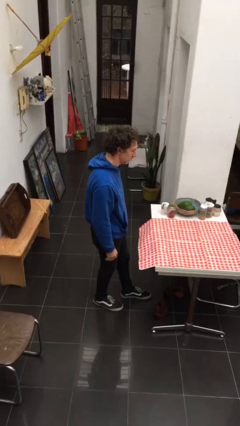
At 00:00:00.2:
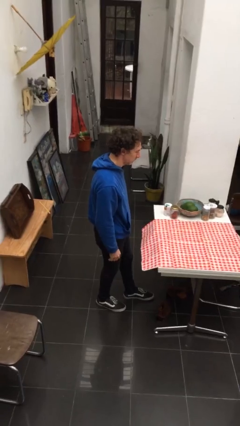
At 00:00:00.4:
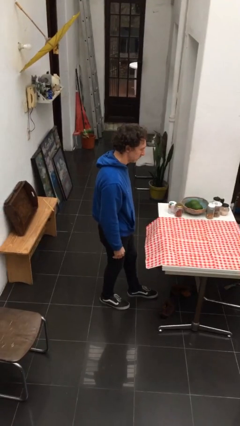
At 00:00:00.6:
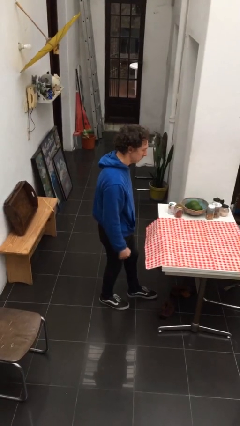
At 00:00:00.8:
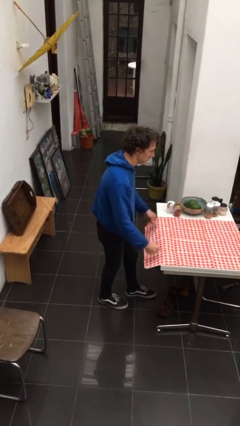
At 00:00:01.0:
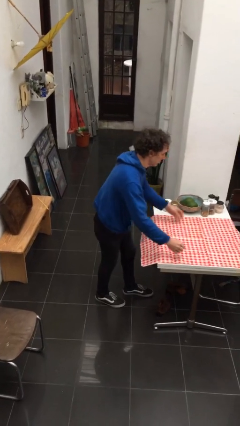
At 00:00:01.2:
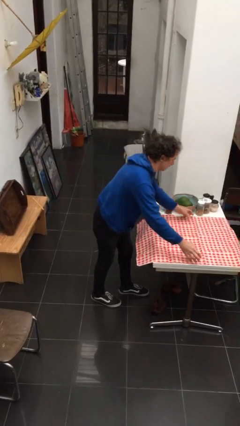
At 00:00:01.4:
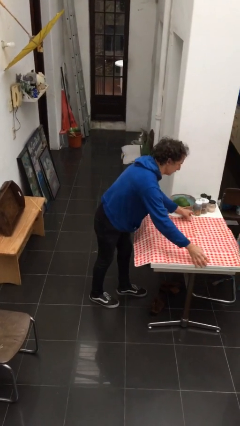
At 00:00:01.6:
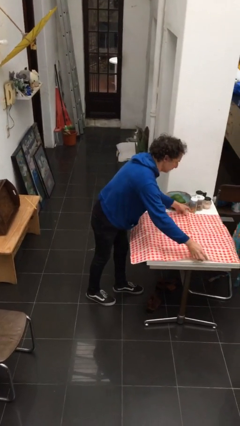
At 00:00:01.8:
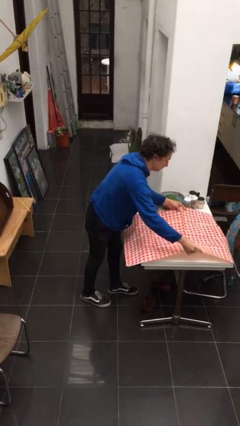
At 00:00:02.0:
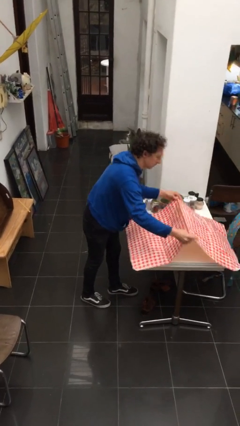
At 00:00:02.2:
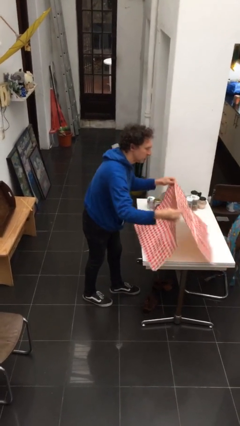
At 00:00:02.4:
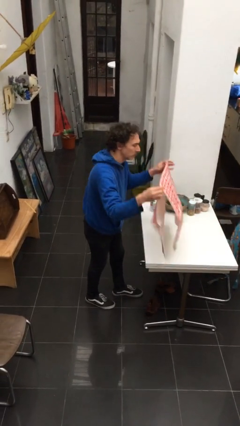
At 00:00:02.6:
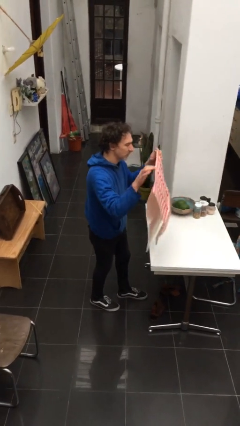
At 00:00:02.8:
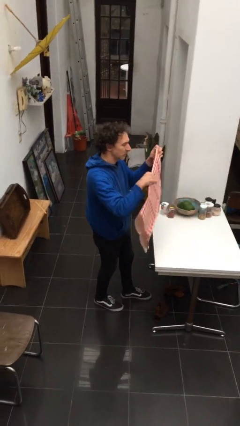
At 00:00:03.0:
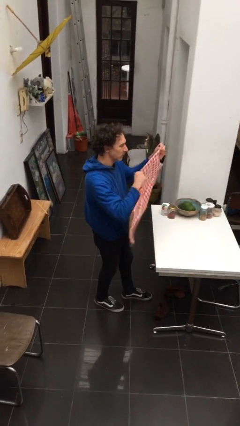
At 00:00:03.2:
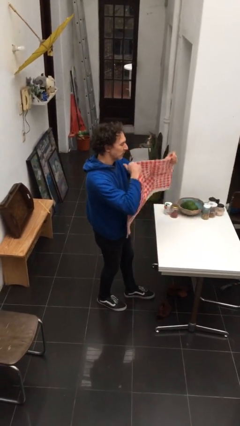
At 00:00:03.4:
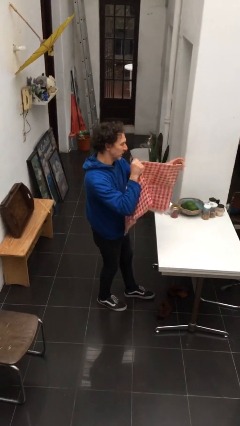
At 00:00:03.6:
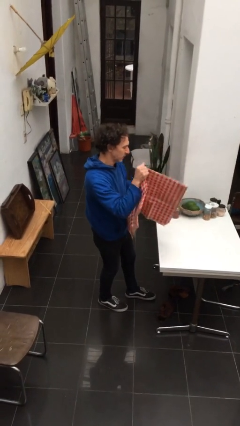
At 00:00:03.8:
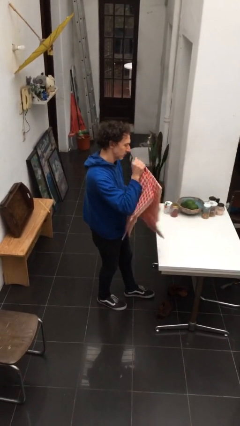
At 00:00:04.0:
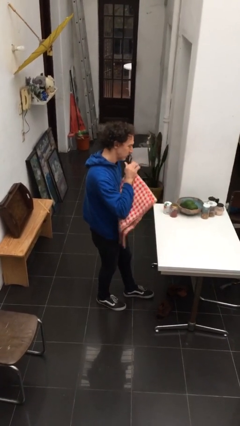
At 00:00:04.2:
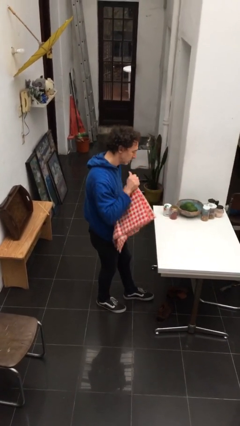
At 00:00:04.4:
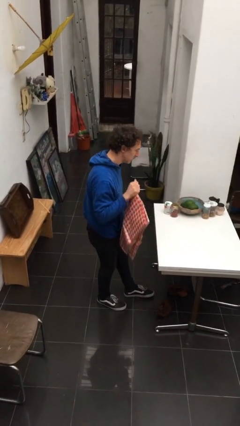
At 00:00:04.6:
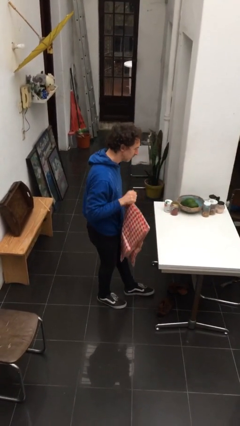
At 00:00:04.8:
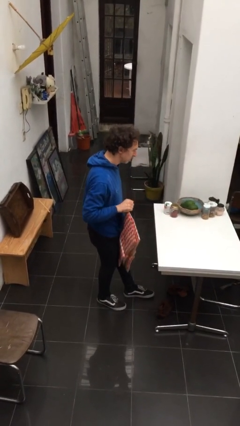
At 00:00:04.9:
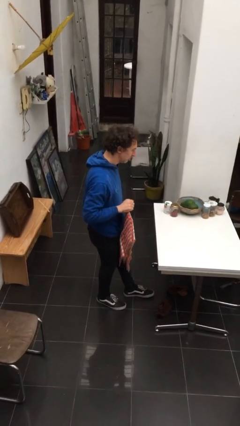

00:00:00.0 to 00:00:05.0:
person folds tablecloth

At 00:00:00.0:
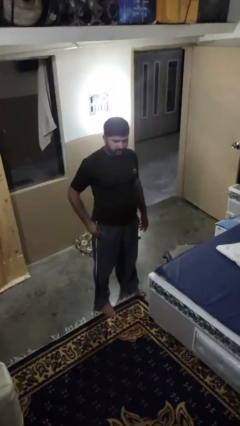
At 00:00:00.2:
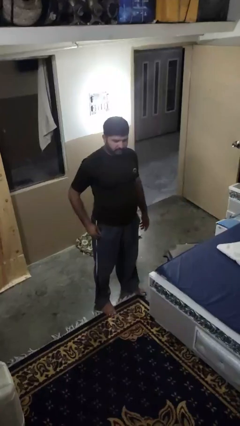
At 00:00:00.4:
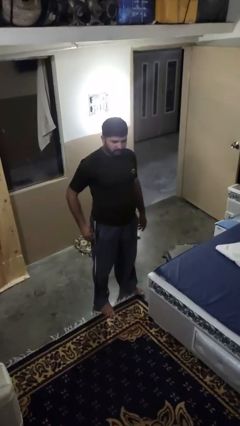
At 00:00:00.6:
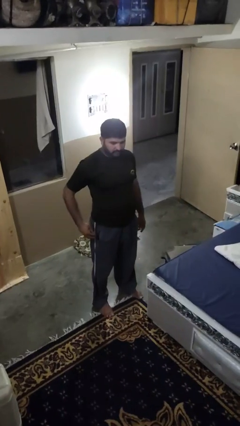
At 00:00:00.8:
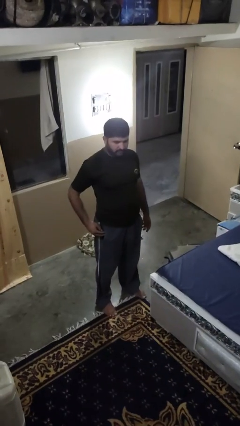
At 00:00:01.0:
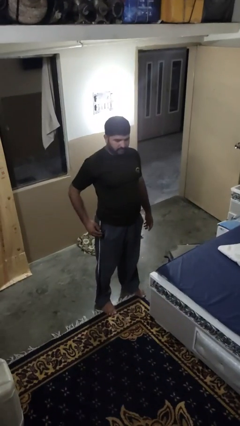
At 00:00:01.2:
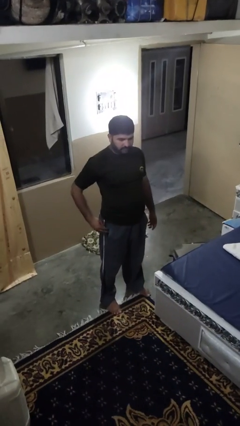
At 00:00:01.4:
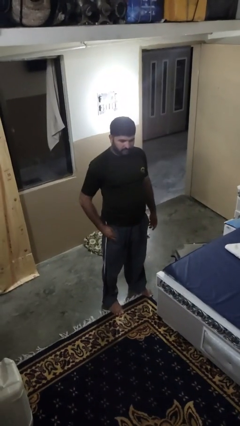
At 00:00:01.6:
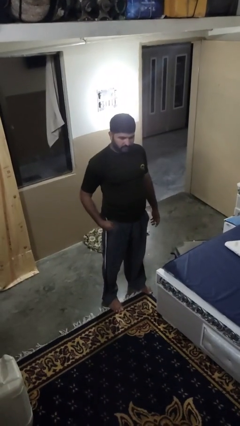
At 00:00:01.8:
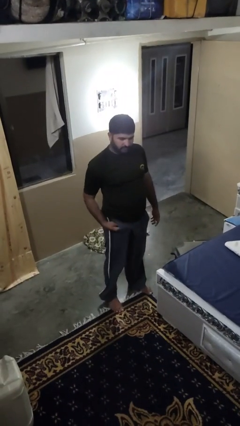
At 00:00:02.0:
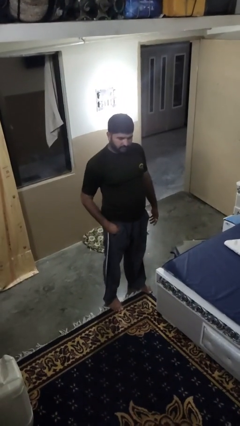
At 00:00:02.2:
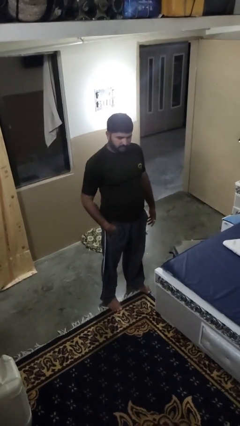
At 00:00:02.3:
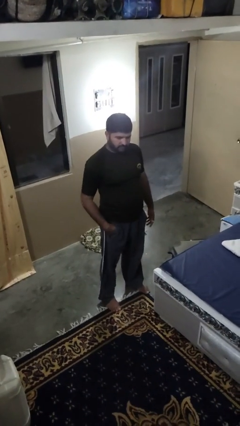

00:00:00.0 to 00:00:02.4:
person puts hands in back pockets

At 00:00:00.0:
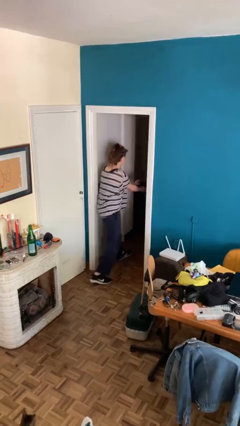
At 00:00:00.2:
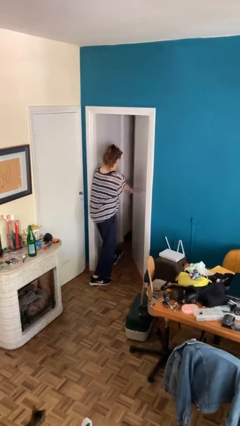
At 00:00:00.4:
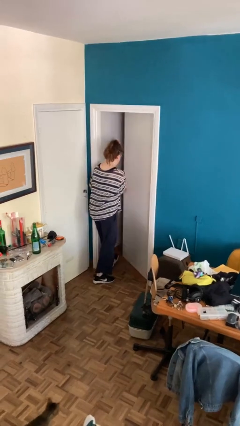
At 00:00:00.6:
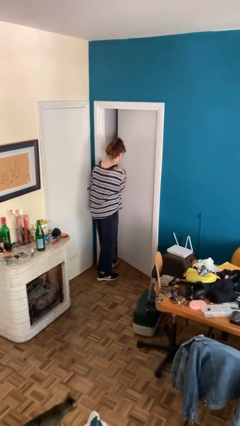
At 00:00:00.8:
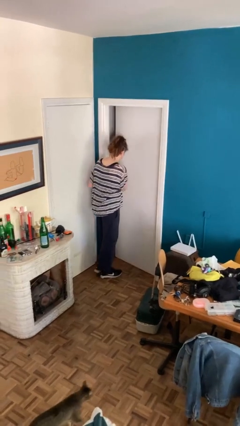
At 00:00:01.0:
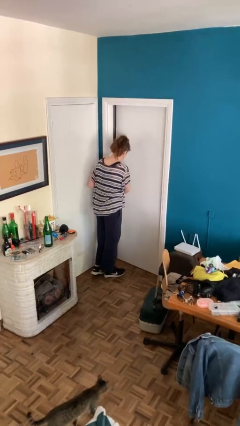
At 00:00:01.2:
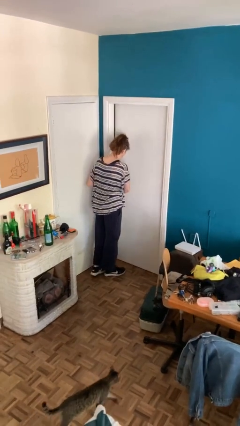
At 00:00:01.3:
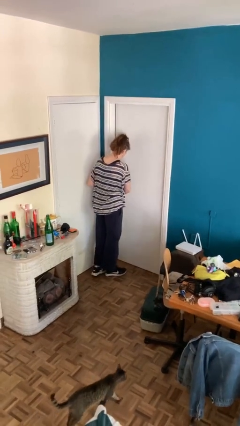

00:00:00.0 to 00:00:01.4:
person closes facility door

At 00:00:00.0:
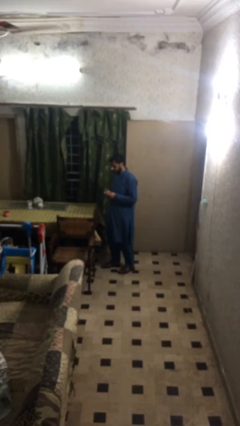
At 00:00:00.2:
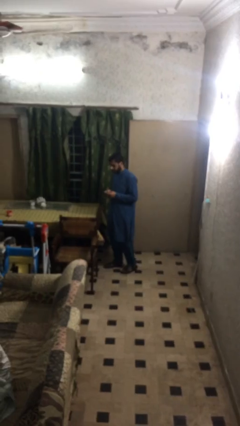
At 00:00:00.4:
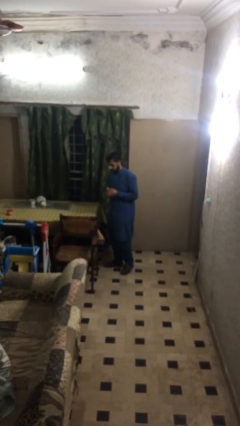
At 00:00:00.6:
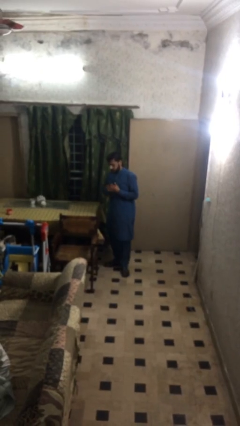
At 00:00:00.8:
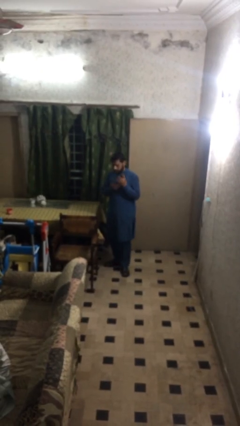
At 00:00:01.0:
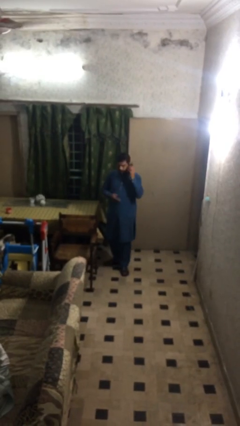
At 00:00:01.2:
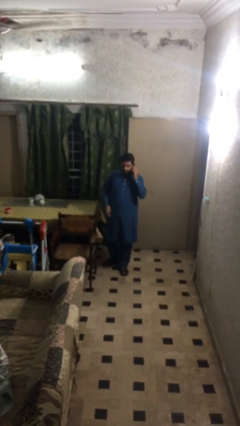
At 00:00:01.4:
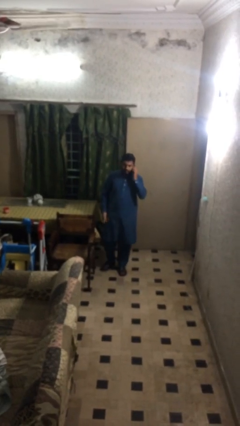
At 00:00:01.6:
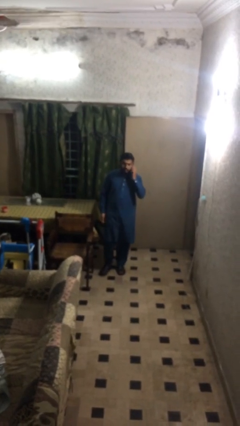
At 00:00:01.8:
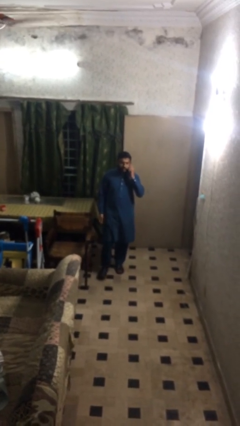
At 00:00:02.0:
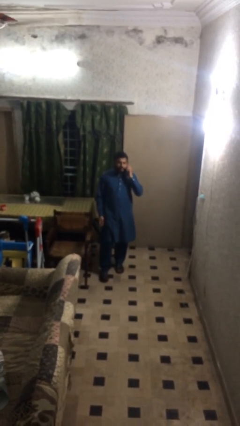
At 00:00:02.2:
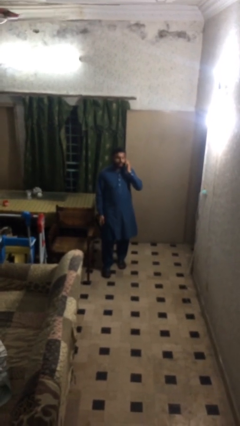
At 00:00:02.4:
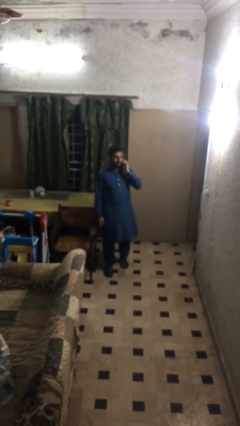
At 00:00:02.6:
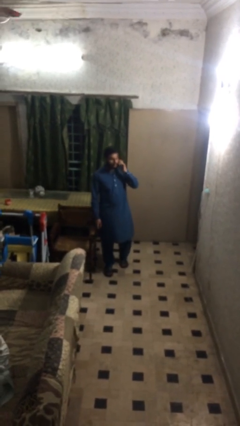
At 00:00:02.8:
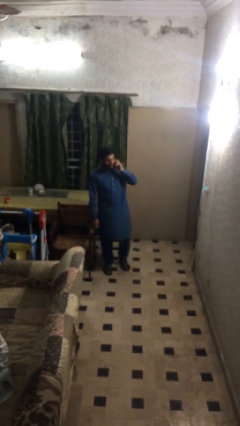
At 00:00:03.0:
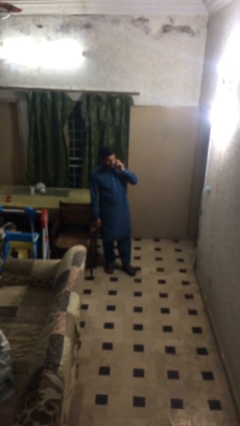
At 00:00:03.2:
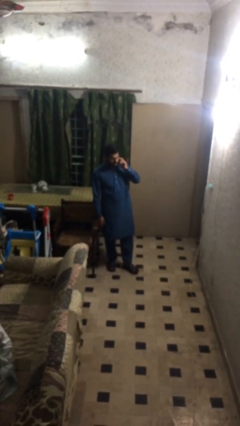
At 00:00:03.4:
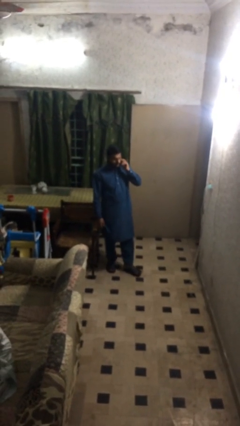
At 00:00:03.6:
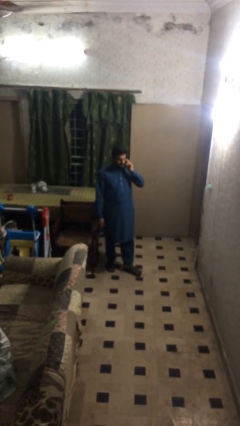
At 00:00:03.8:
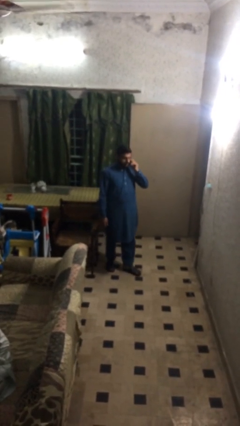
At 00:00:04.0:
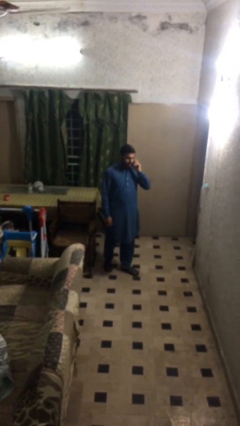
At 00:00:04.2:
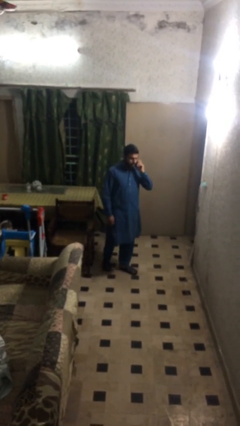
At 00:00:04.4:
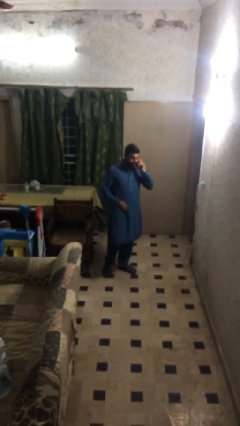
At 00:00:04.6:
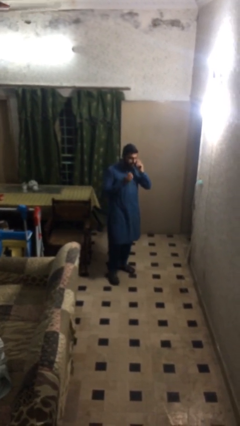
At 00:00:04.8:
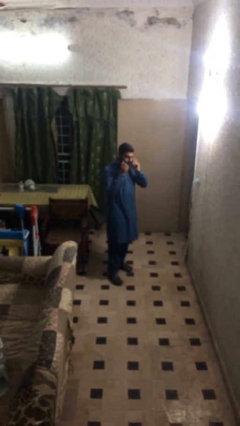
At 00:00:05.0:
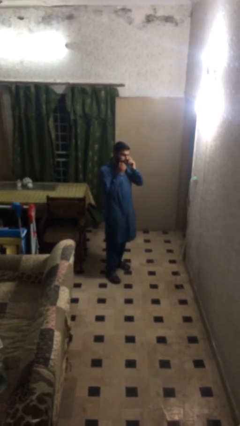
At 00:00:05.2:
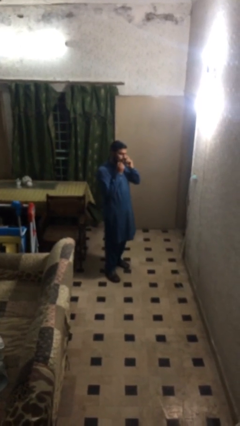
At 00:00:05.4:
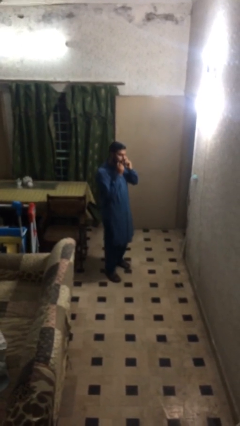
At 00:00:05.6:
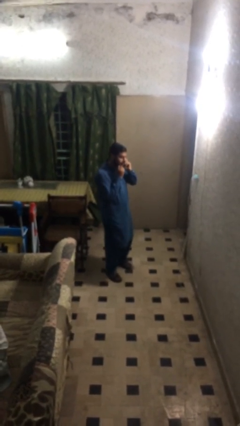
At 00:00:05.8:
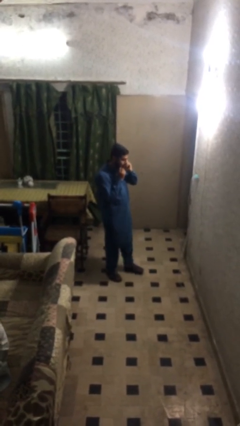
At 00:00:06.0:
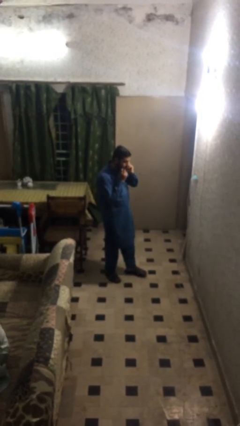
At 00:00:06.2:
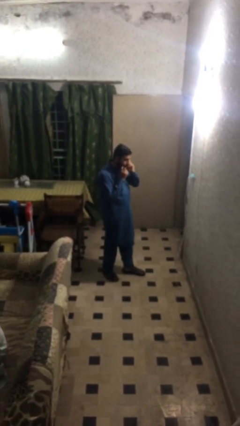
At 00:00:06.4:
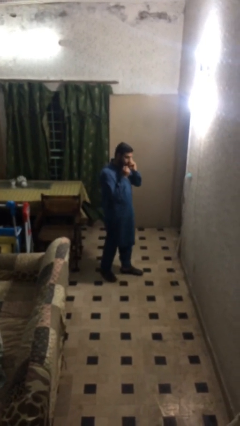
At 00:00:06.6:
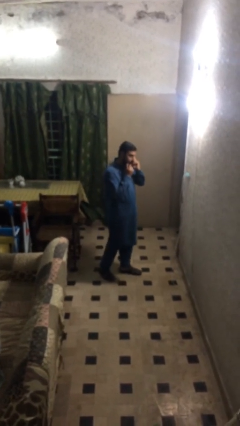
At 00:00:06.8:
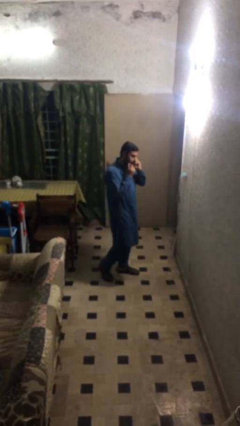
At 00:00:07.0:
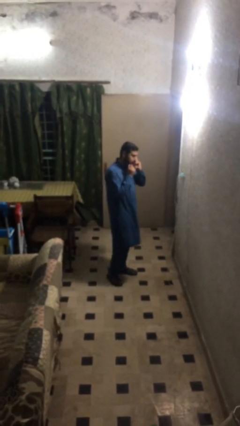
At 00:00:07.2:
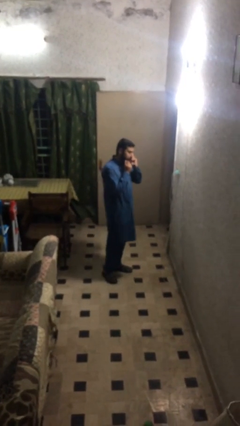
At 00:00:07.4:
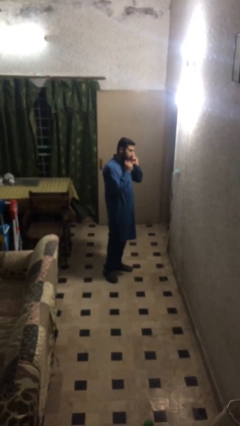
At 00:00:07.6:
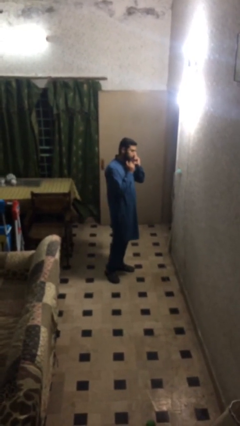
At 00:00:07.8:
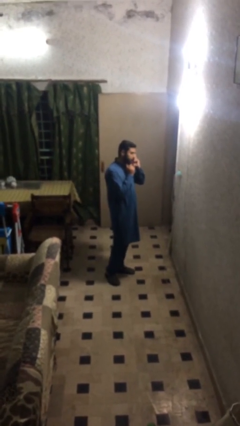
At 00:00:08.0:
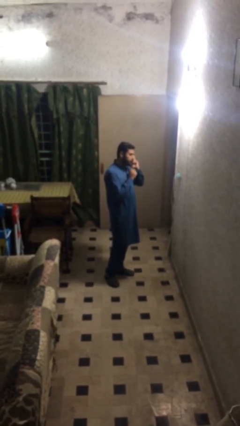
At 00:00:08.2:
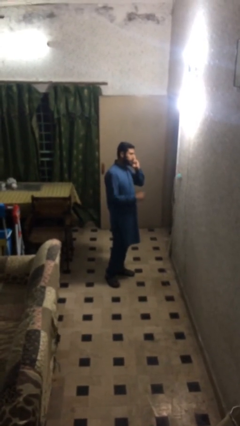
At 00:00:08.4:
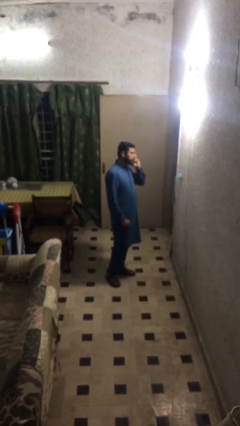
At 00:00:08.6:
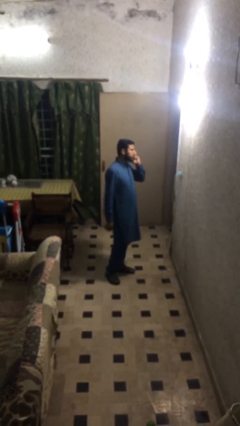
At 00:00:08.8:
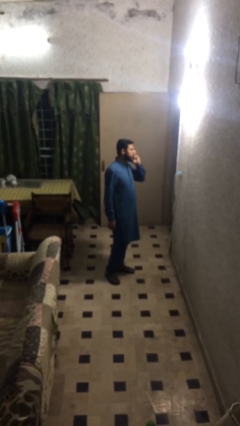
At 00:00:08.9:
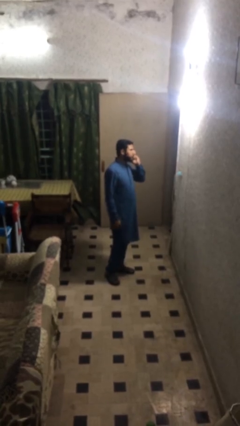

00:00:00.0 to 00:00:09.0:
person talks on phone
